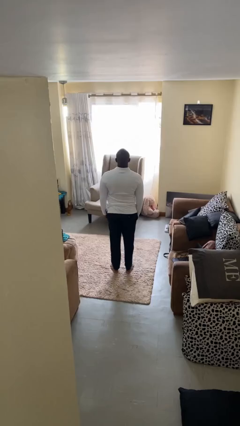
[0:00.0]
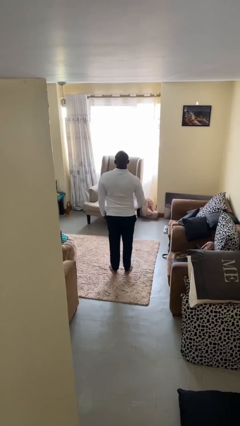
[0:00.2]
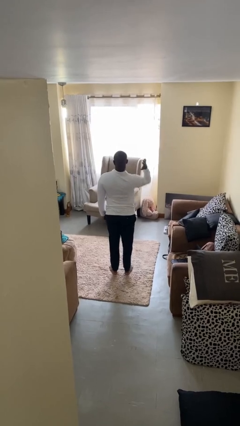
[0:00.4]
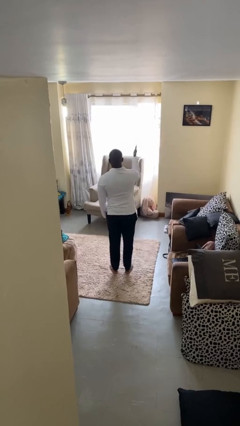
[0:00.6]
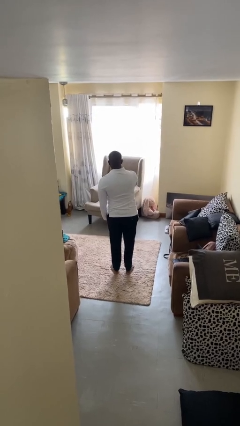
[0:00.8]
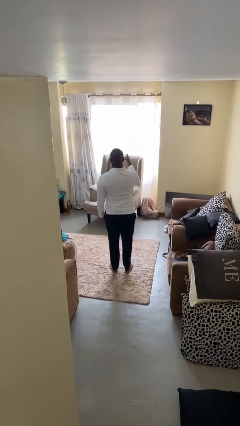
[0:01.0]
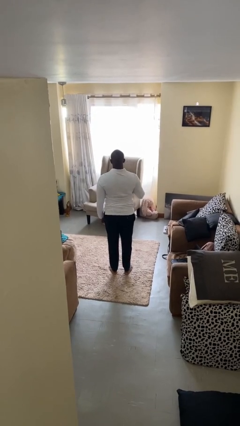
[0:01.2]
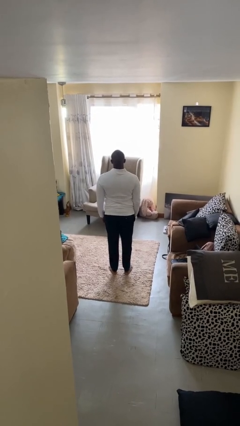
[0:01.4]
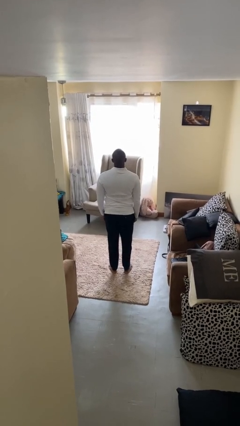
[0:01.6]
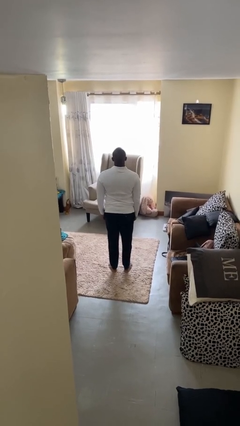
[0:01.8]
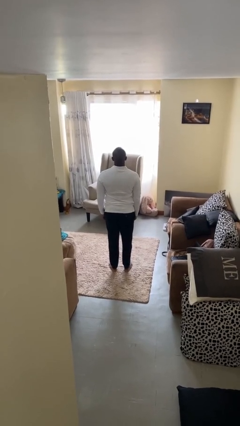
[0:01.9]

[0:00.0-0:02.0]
person karate chop

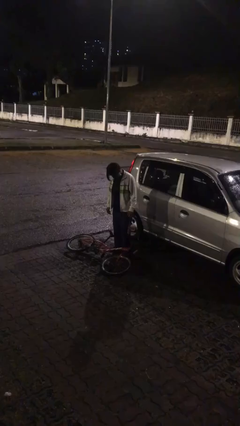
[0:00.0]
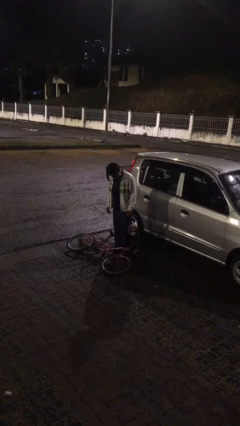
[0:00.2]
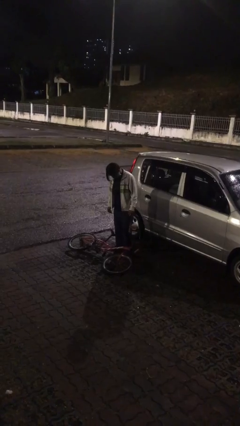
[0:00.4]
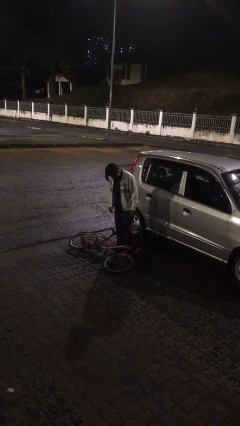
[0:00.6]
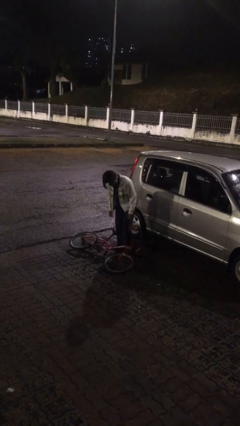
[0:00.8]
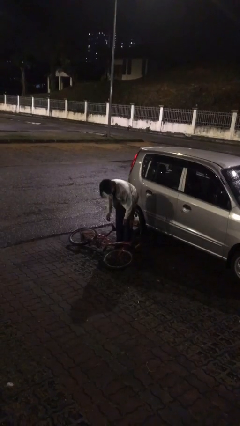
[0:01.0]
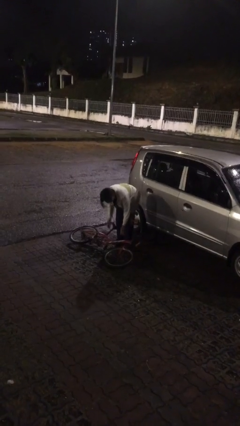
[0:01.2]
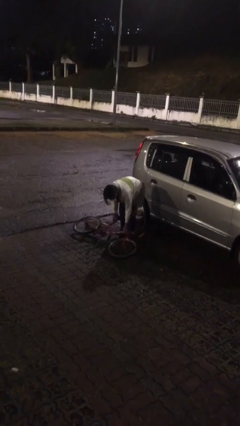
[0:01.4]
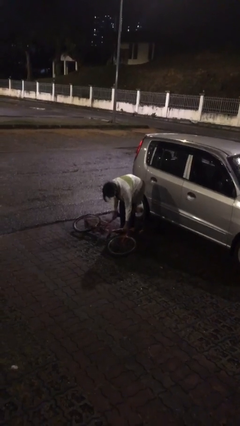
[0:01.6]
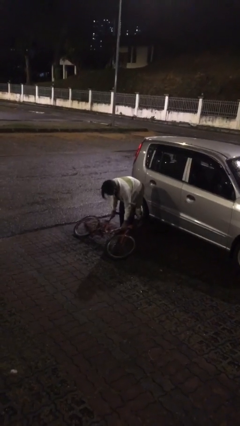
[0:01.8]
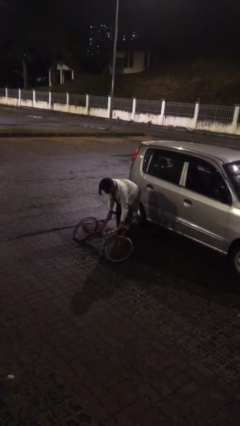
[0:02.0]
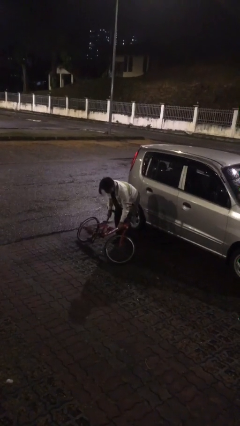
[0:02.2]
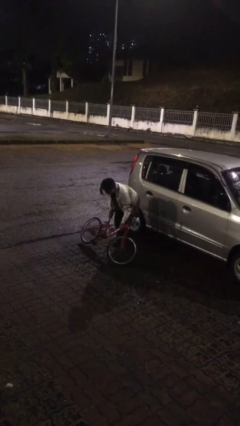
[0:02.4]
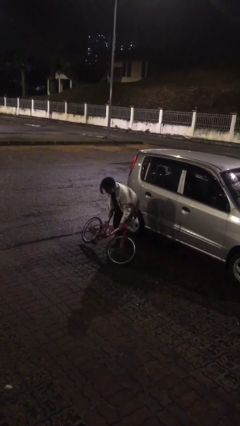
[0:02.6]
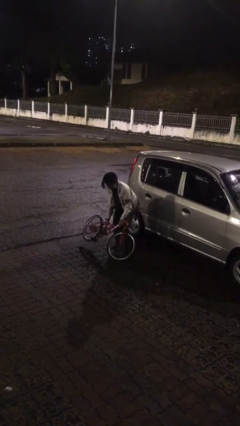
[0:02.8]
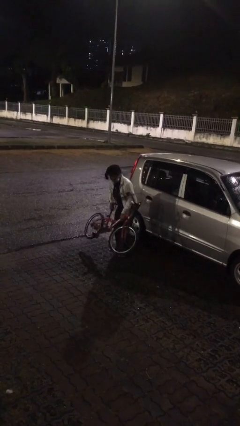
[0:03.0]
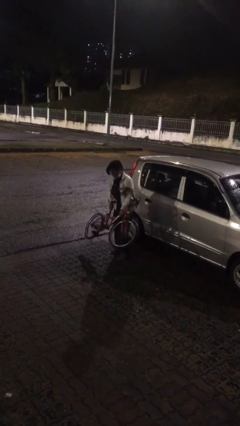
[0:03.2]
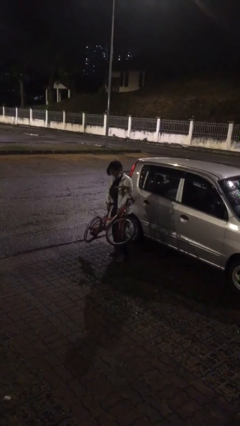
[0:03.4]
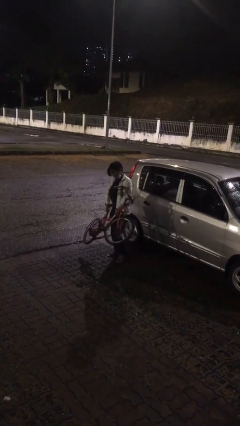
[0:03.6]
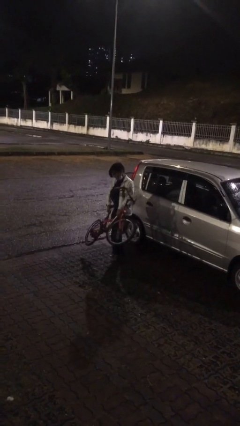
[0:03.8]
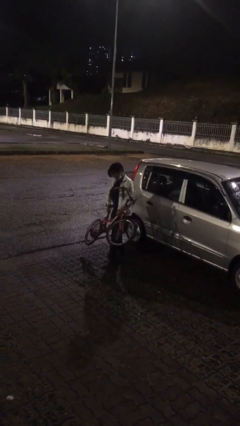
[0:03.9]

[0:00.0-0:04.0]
person picks up object from floor

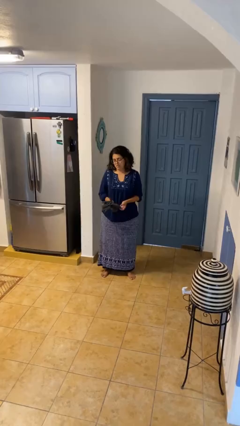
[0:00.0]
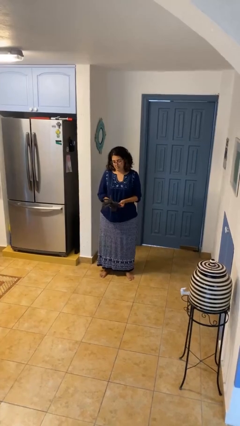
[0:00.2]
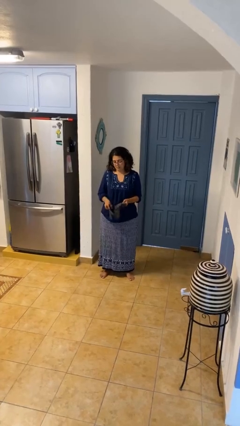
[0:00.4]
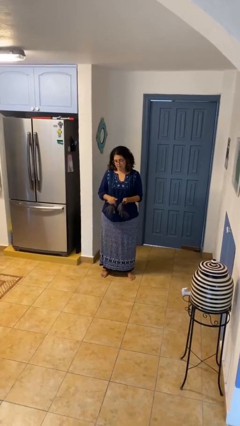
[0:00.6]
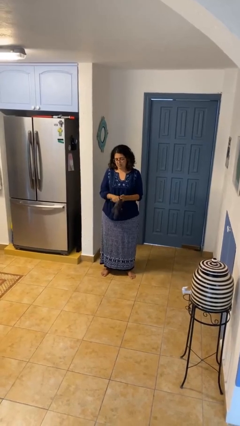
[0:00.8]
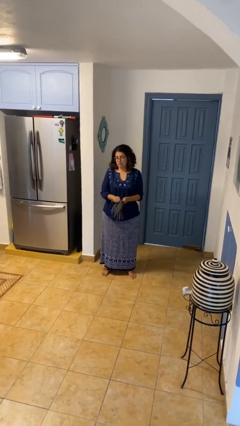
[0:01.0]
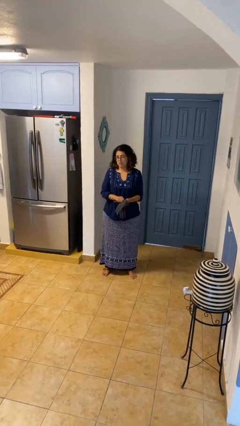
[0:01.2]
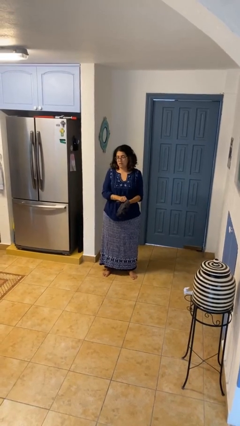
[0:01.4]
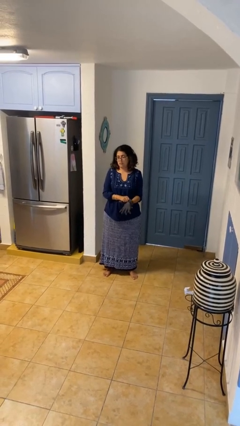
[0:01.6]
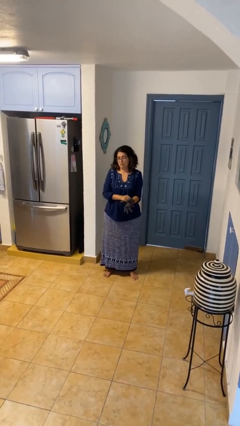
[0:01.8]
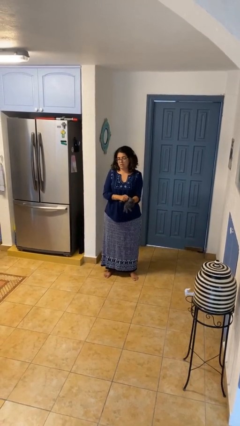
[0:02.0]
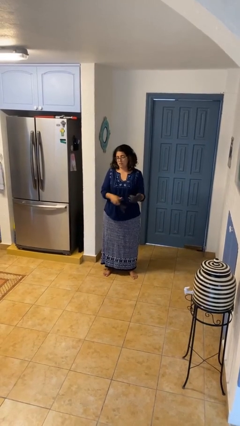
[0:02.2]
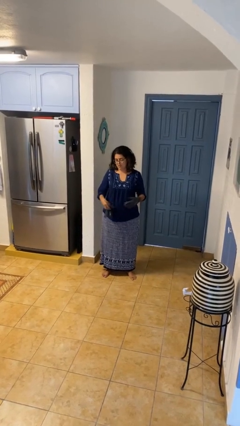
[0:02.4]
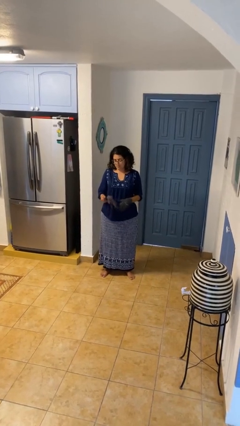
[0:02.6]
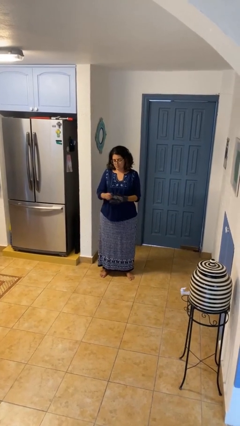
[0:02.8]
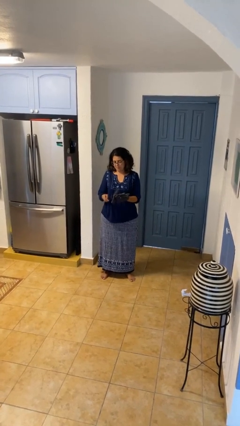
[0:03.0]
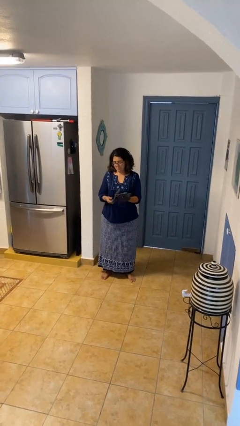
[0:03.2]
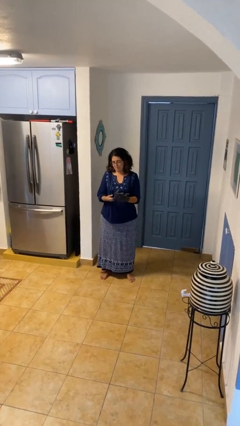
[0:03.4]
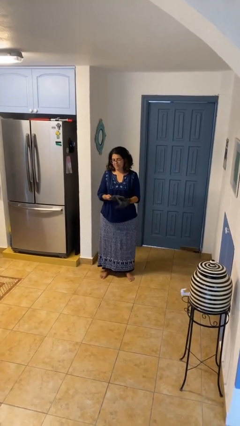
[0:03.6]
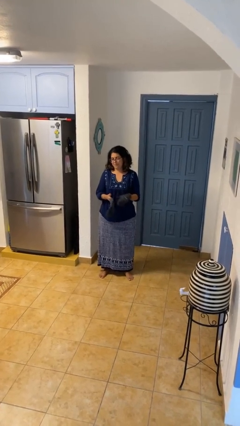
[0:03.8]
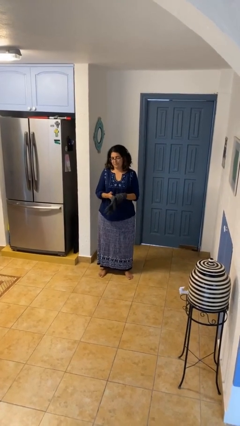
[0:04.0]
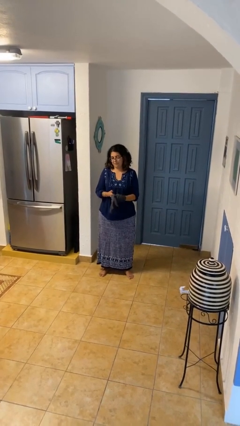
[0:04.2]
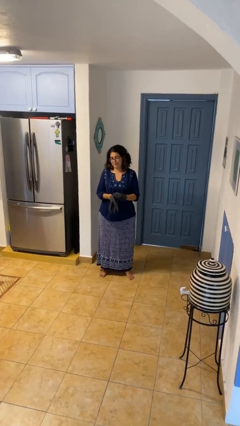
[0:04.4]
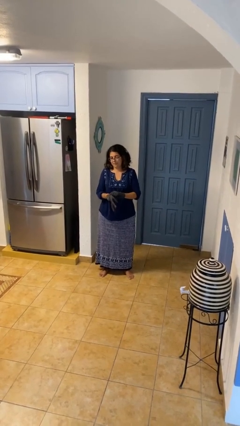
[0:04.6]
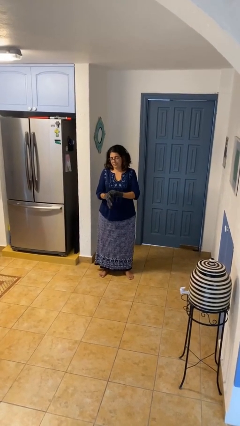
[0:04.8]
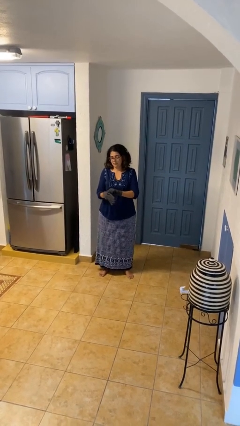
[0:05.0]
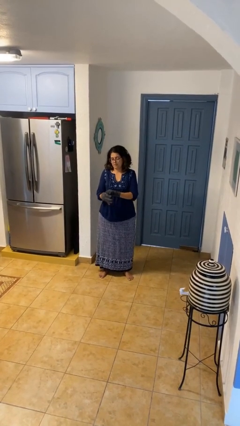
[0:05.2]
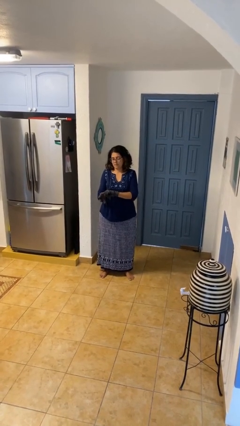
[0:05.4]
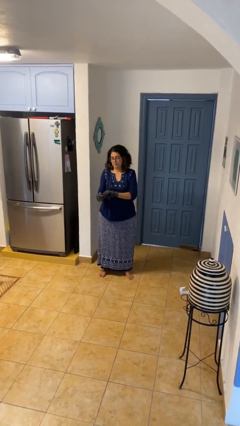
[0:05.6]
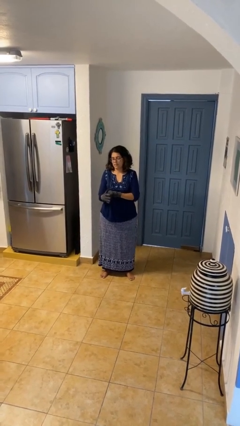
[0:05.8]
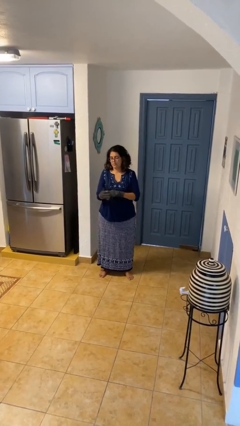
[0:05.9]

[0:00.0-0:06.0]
person puts on gloves

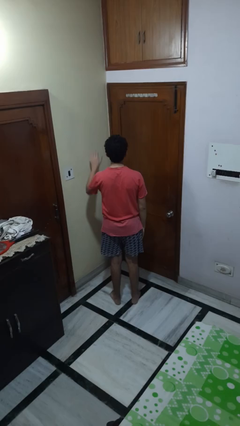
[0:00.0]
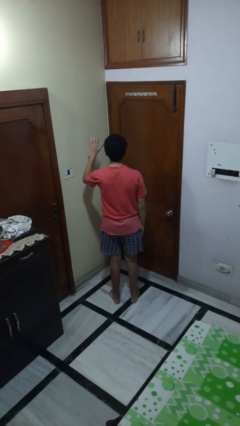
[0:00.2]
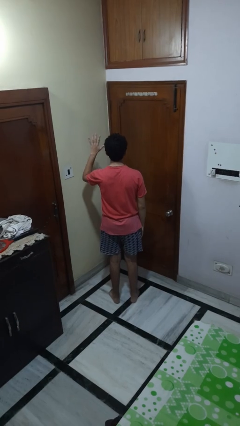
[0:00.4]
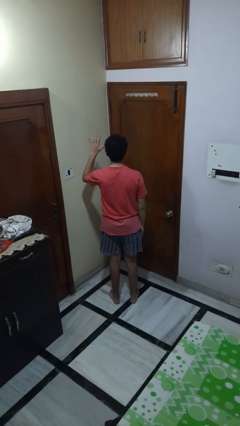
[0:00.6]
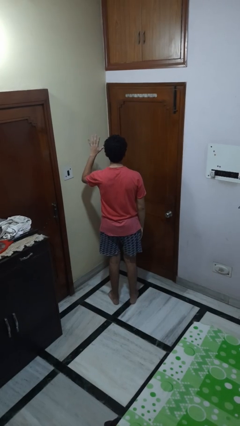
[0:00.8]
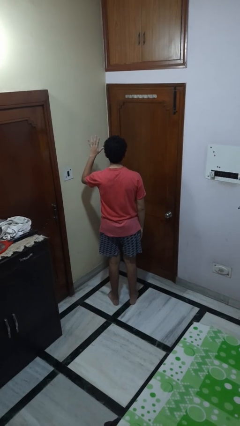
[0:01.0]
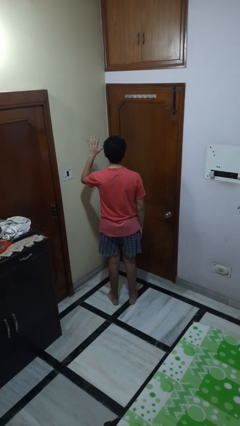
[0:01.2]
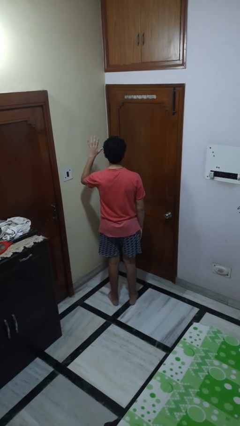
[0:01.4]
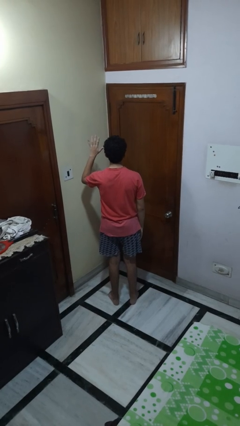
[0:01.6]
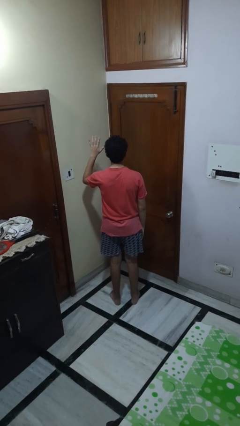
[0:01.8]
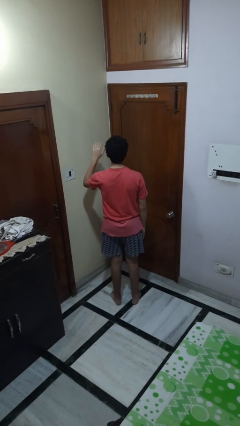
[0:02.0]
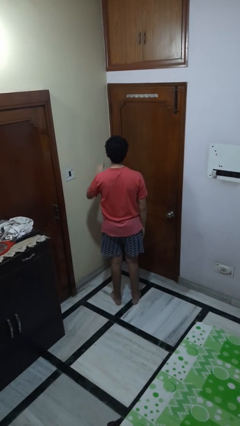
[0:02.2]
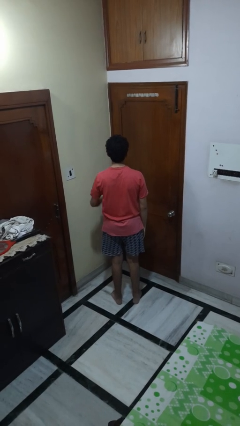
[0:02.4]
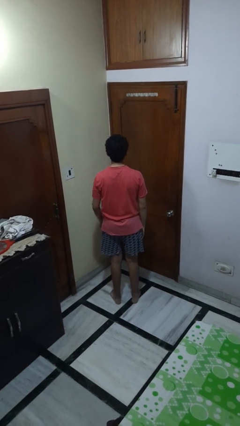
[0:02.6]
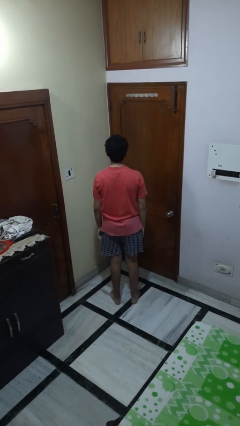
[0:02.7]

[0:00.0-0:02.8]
person gestures number five

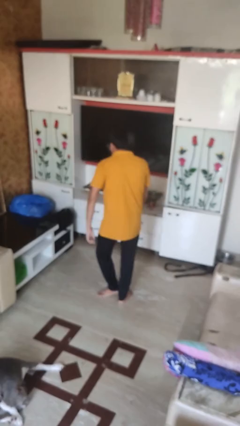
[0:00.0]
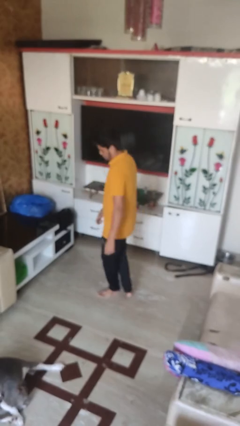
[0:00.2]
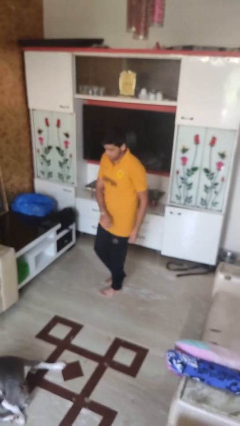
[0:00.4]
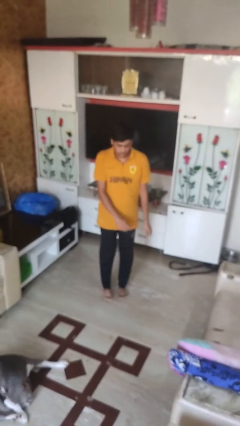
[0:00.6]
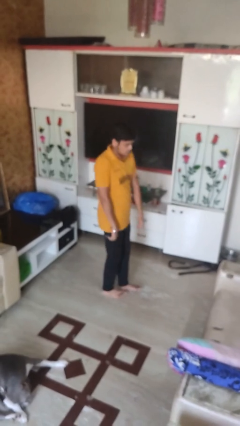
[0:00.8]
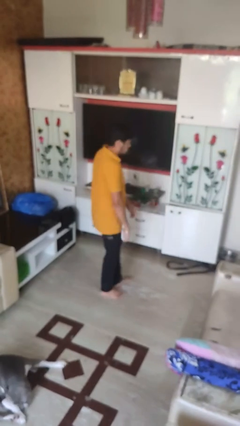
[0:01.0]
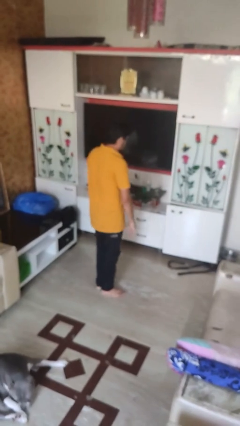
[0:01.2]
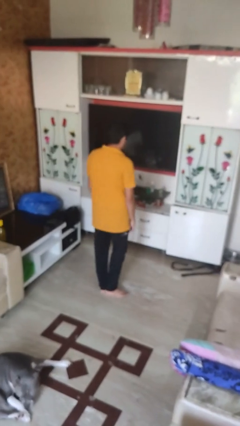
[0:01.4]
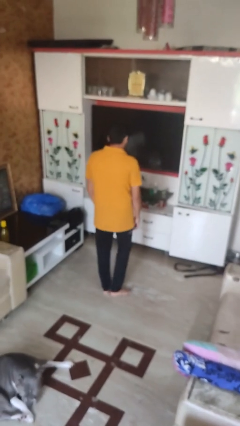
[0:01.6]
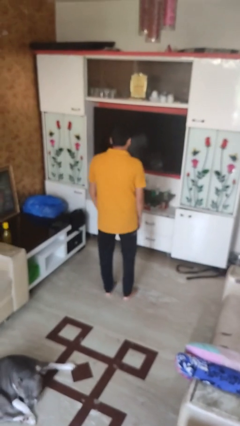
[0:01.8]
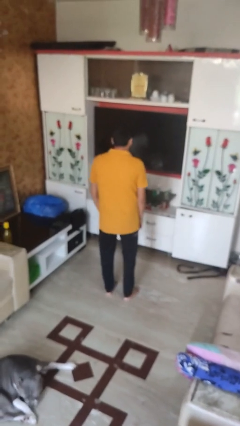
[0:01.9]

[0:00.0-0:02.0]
person twirls

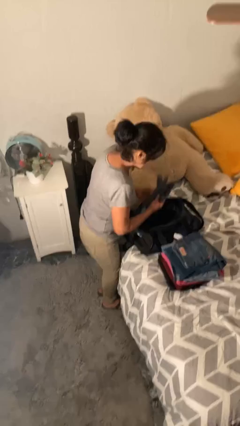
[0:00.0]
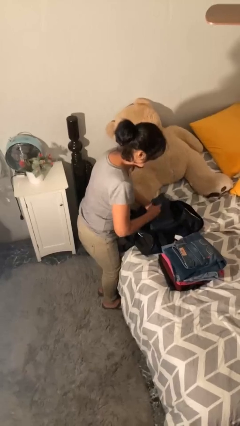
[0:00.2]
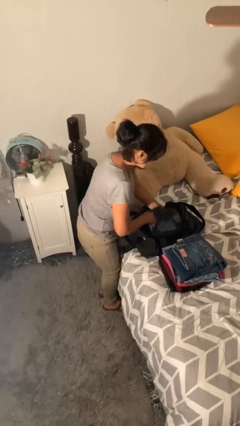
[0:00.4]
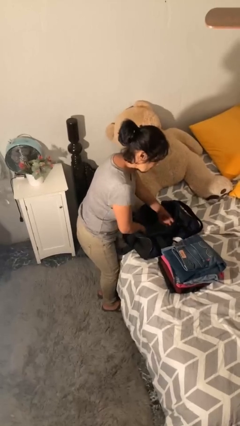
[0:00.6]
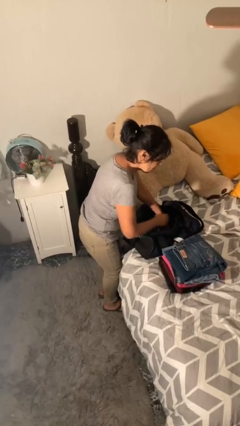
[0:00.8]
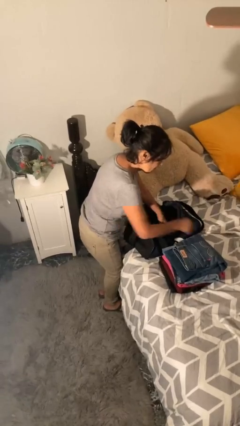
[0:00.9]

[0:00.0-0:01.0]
person loads clothes into suitcase
